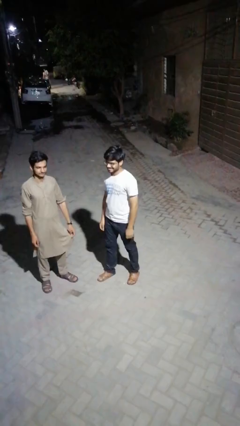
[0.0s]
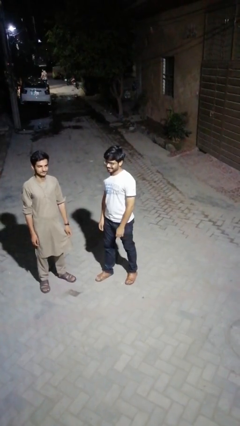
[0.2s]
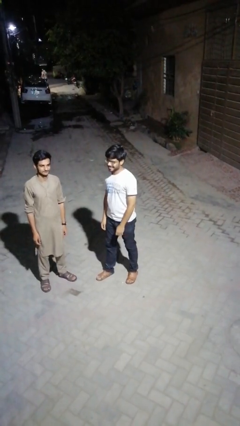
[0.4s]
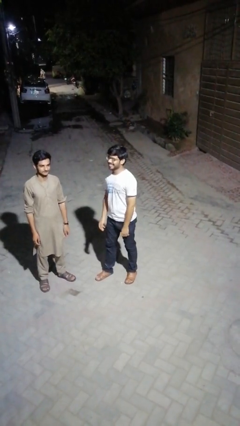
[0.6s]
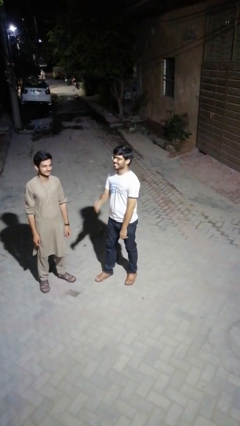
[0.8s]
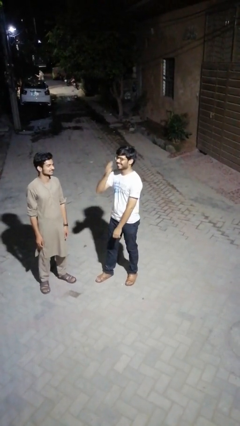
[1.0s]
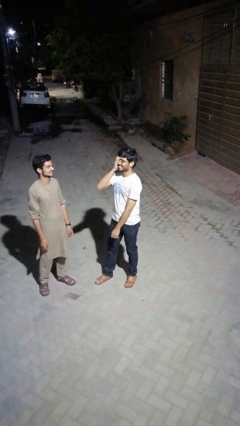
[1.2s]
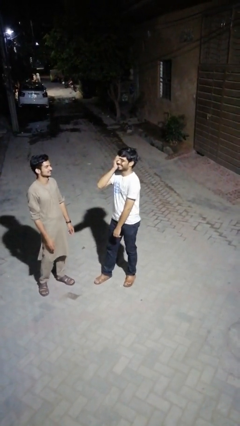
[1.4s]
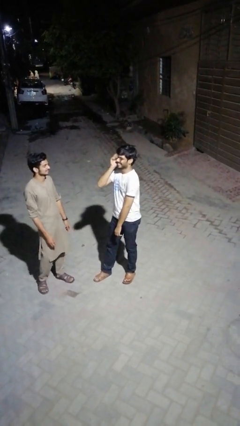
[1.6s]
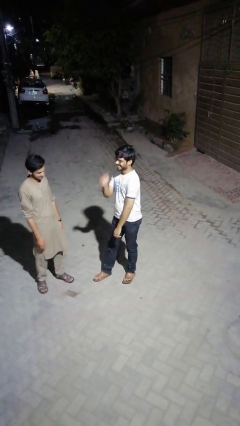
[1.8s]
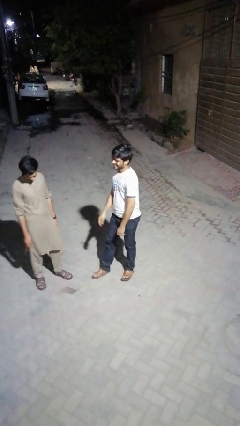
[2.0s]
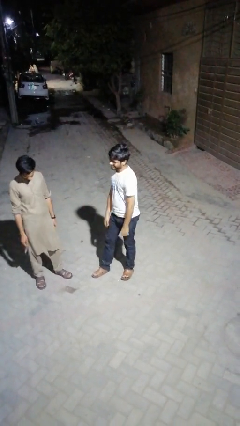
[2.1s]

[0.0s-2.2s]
person laughs with person

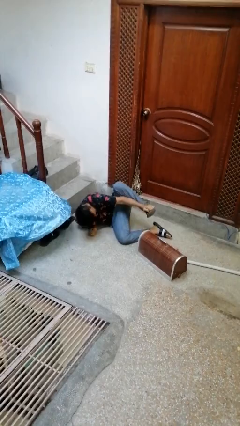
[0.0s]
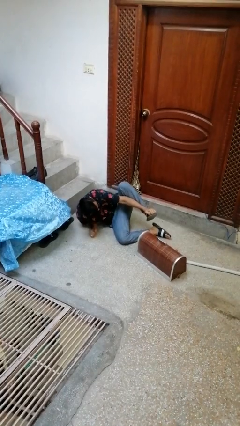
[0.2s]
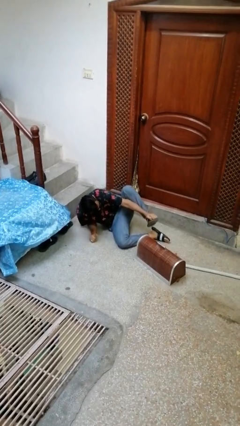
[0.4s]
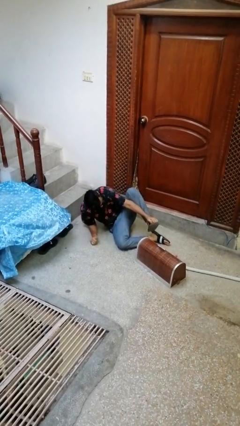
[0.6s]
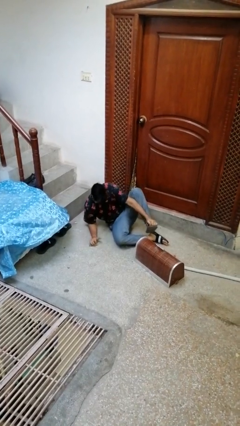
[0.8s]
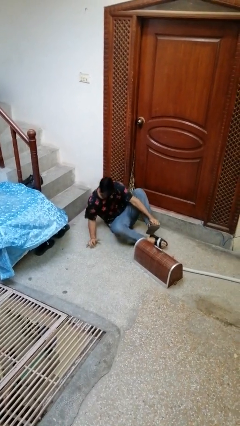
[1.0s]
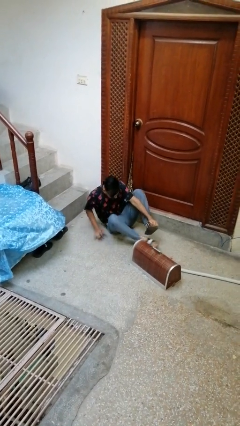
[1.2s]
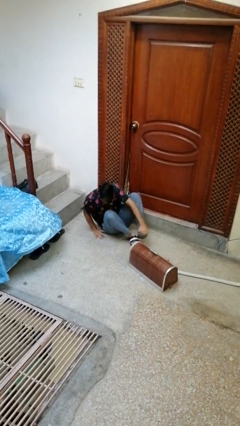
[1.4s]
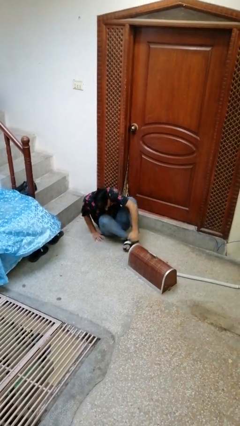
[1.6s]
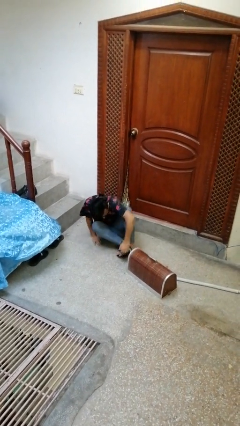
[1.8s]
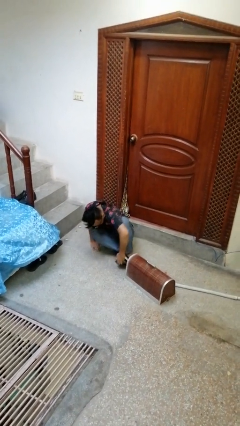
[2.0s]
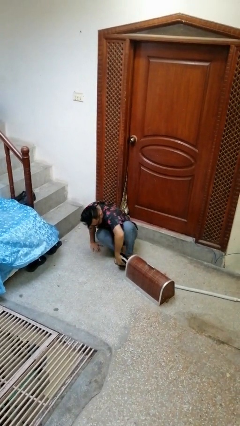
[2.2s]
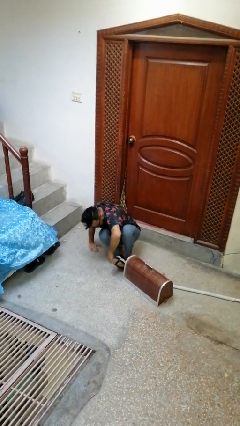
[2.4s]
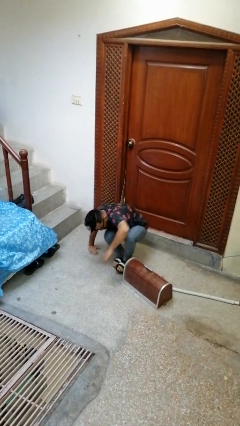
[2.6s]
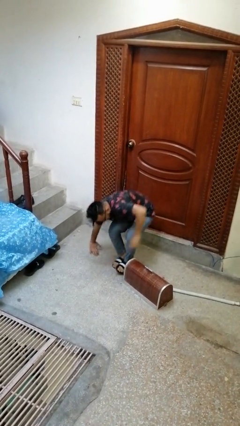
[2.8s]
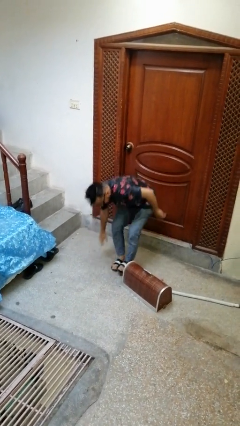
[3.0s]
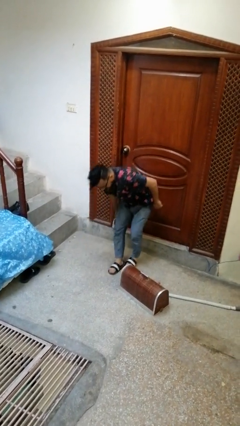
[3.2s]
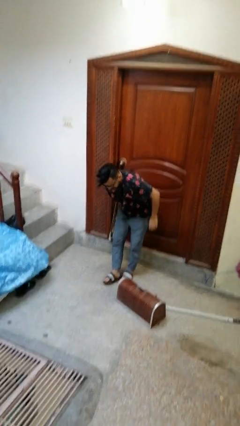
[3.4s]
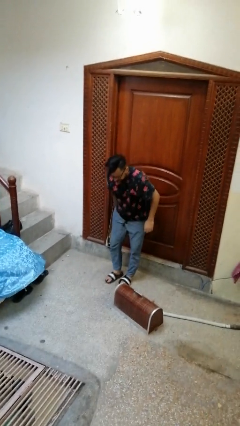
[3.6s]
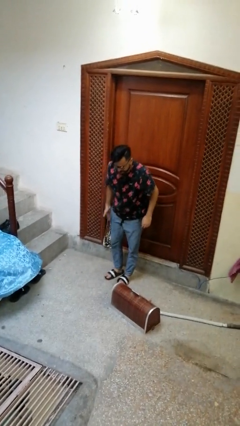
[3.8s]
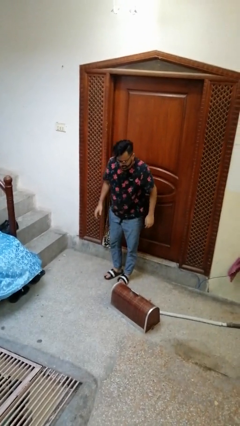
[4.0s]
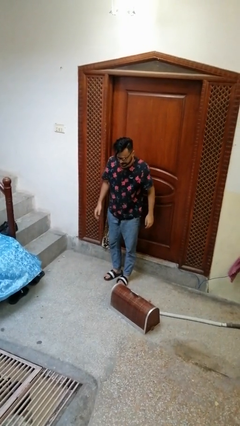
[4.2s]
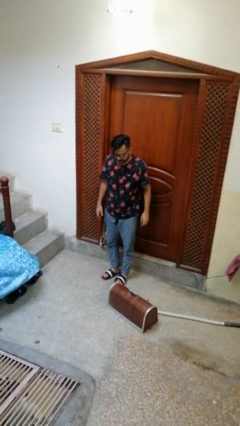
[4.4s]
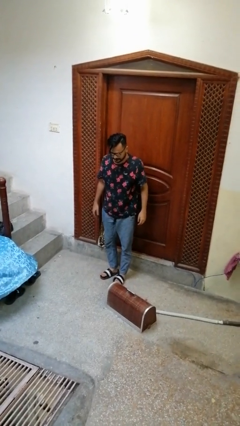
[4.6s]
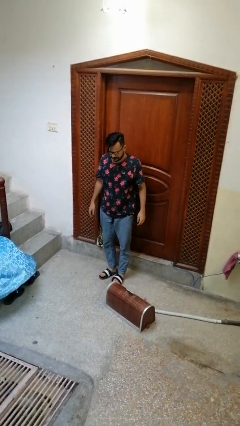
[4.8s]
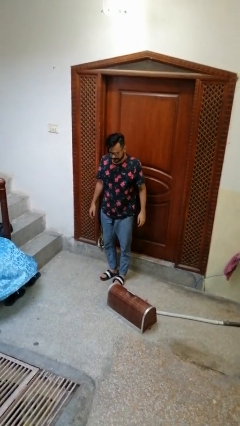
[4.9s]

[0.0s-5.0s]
person stands up from floor

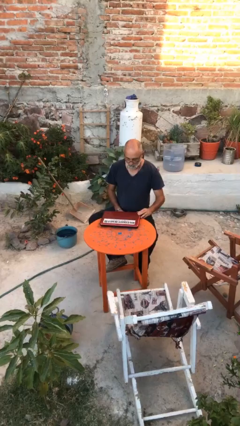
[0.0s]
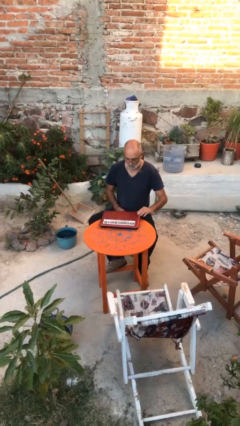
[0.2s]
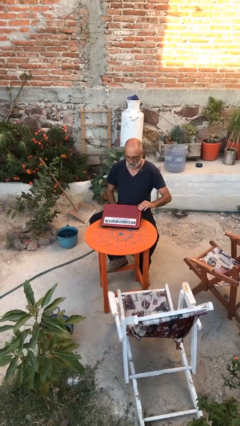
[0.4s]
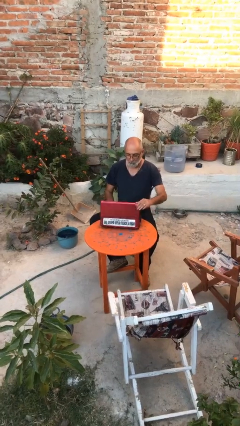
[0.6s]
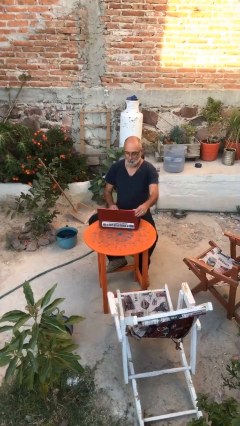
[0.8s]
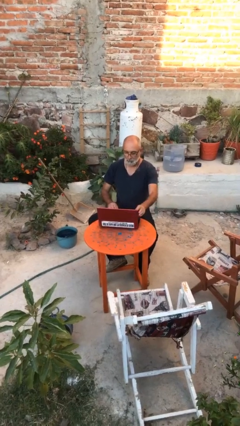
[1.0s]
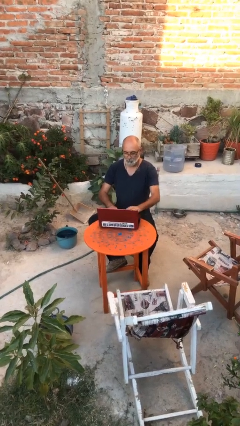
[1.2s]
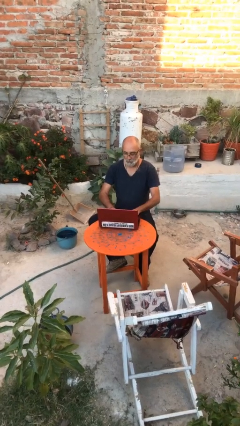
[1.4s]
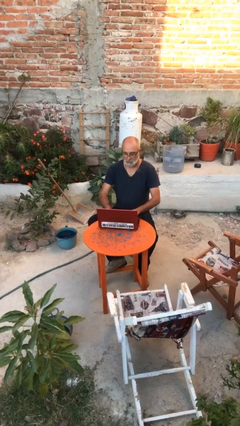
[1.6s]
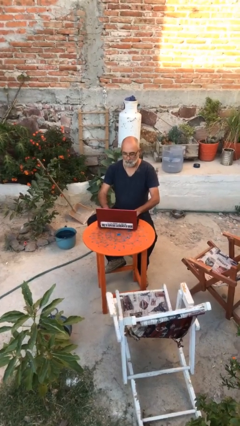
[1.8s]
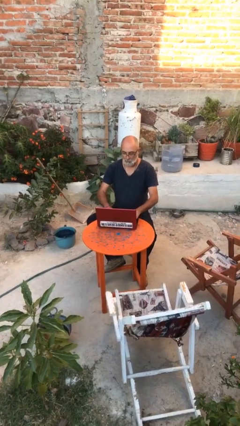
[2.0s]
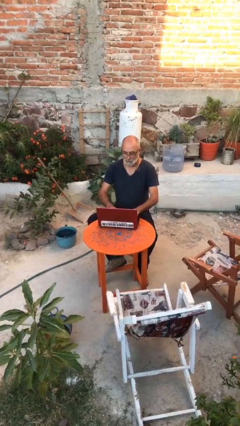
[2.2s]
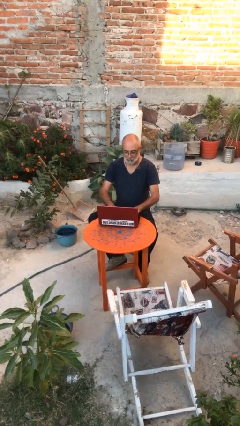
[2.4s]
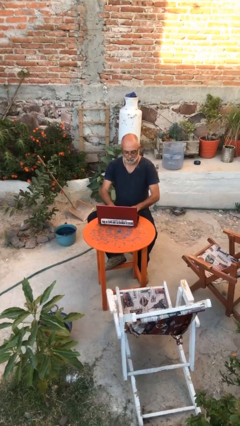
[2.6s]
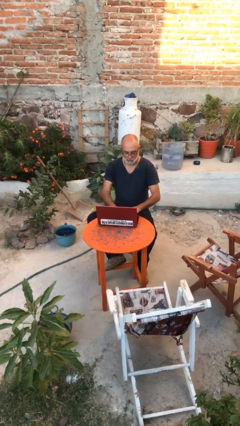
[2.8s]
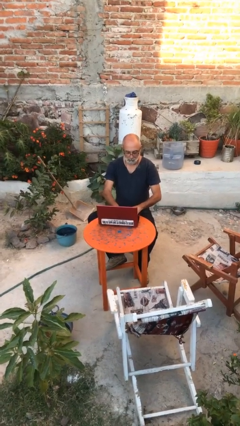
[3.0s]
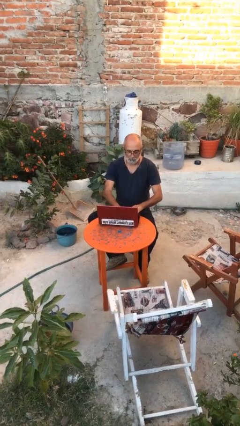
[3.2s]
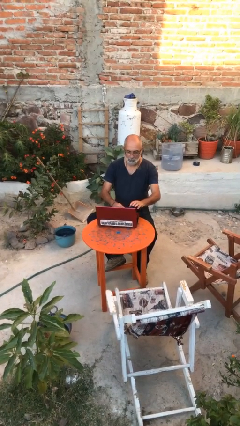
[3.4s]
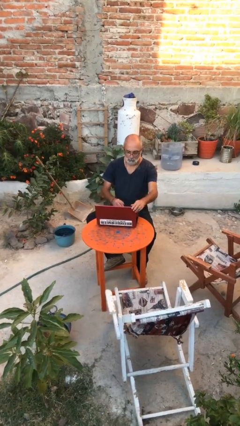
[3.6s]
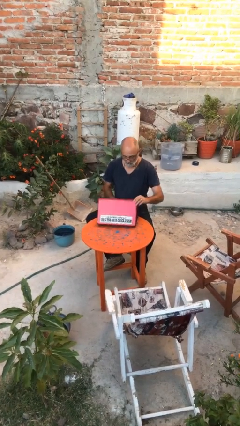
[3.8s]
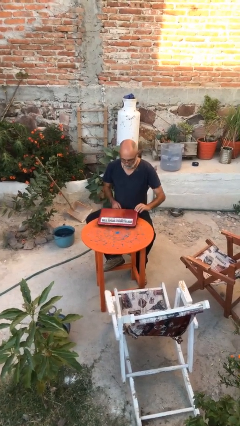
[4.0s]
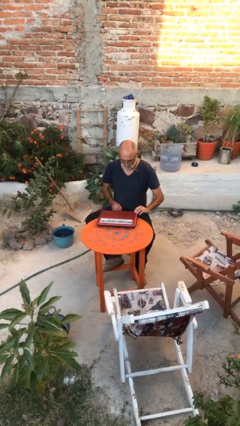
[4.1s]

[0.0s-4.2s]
person interacts with laptop

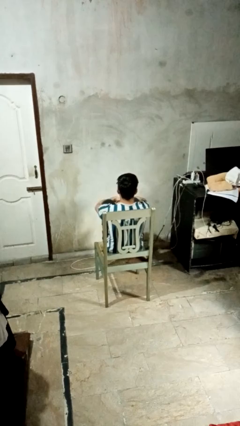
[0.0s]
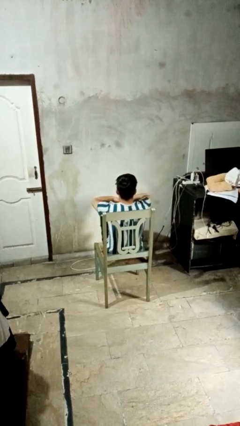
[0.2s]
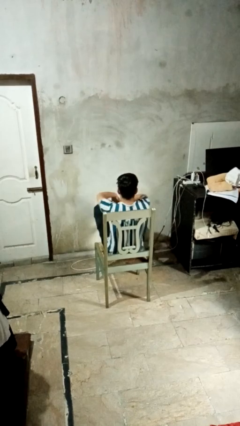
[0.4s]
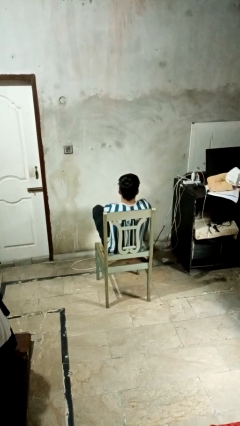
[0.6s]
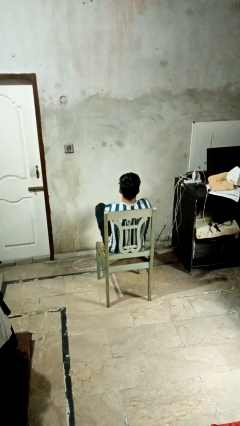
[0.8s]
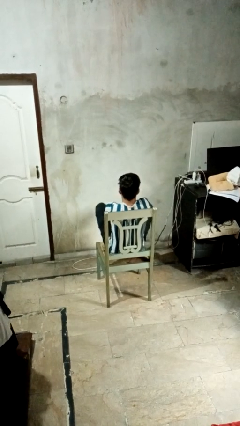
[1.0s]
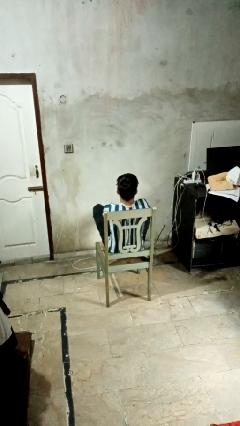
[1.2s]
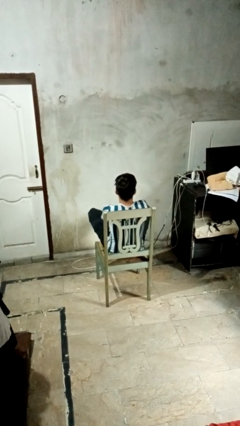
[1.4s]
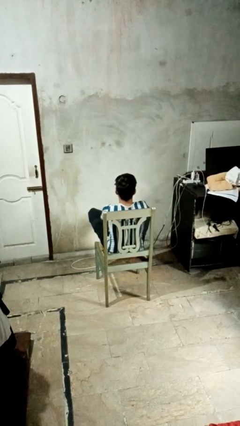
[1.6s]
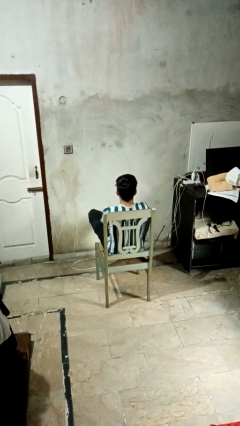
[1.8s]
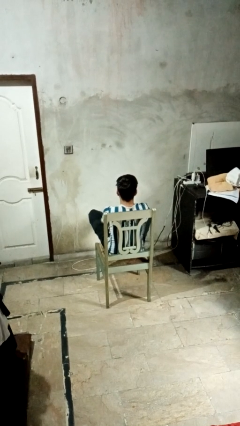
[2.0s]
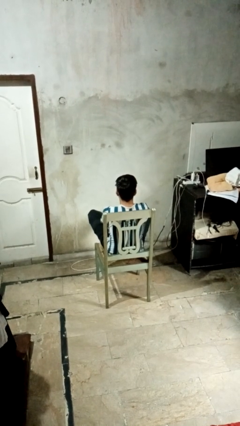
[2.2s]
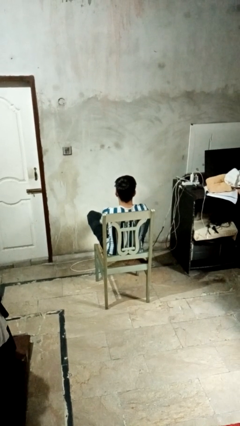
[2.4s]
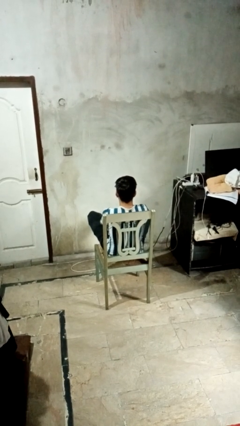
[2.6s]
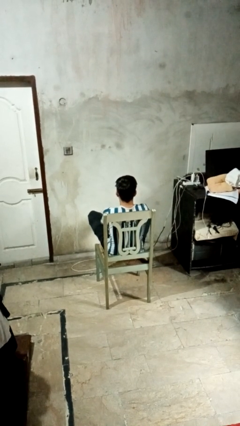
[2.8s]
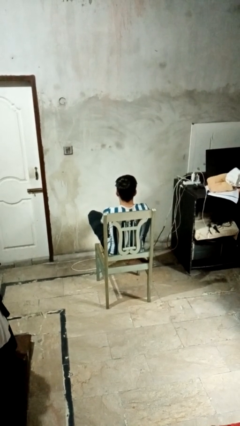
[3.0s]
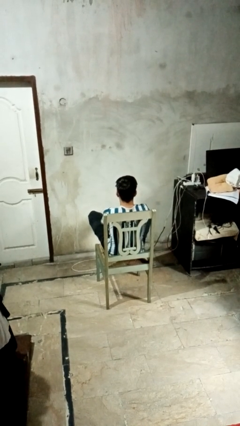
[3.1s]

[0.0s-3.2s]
person crosses legs

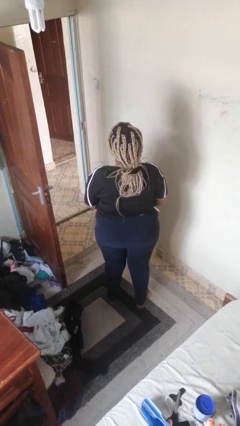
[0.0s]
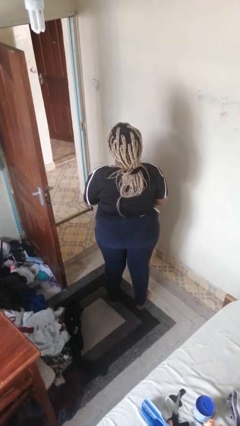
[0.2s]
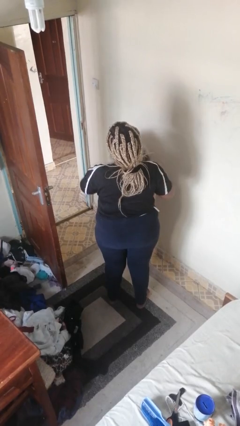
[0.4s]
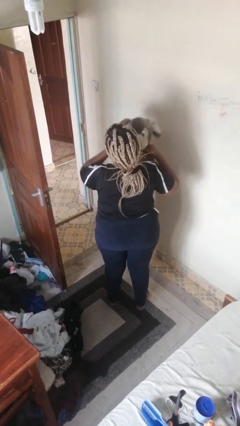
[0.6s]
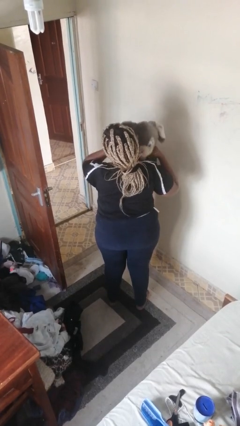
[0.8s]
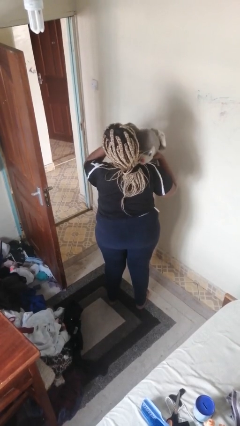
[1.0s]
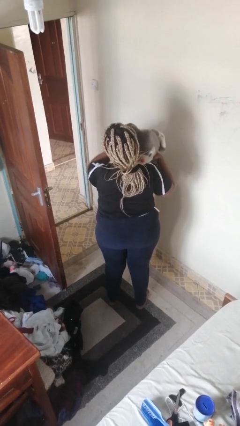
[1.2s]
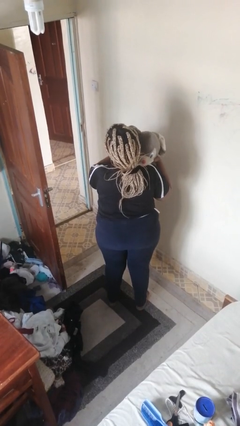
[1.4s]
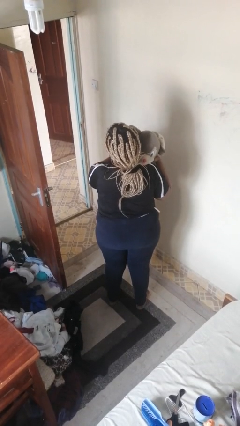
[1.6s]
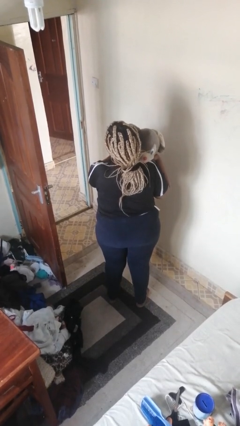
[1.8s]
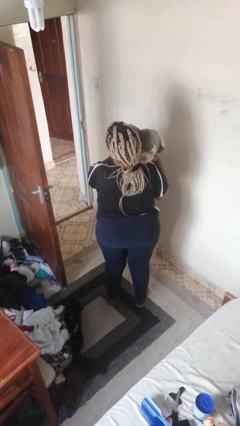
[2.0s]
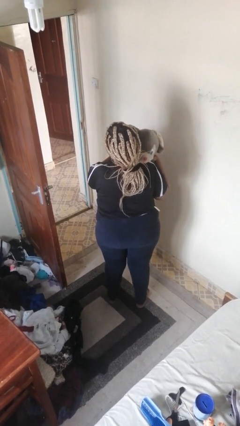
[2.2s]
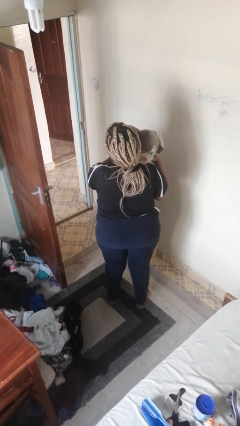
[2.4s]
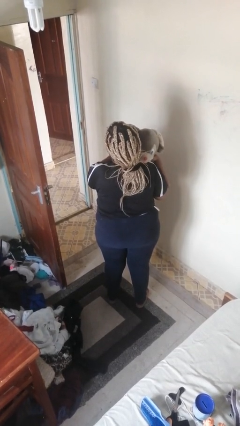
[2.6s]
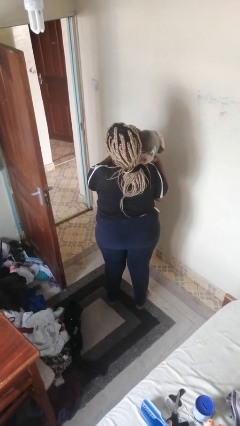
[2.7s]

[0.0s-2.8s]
person hugs stuffed animal

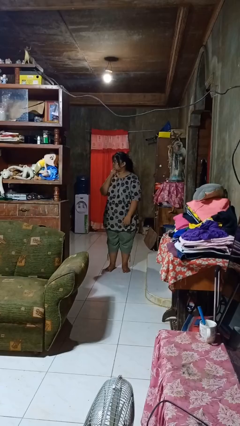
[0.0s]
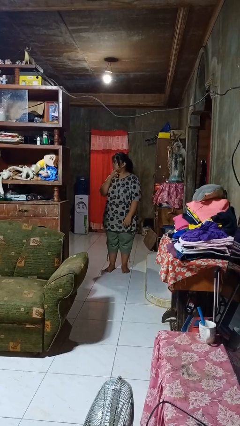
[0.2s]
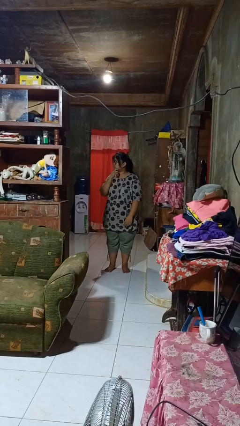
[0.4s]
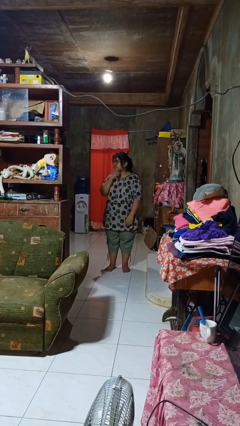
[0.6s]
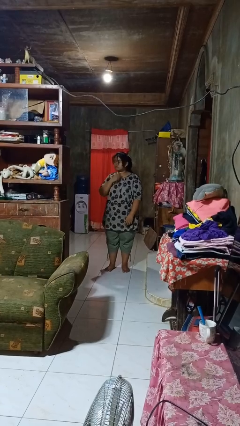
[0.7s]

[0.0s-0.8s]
person strokes chin
